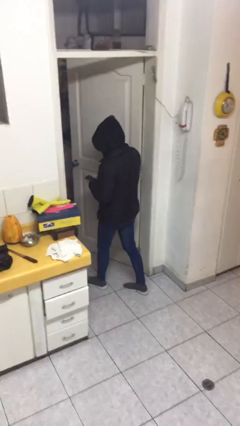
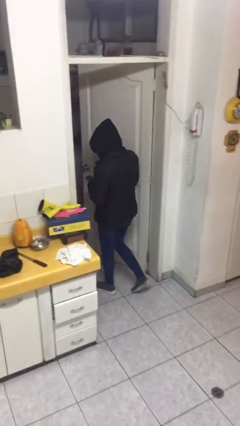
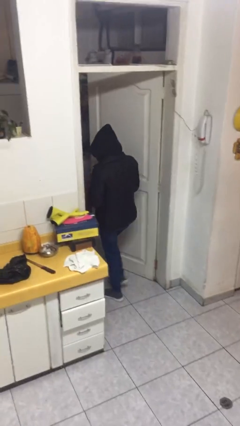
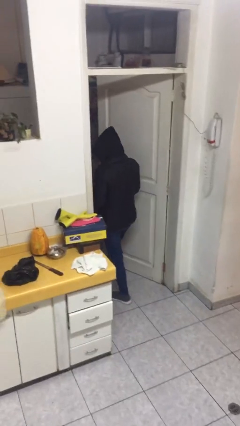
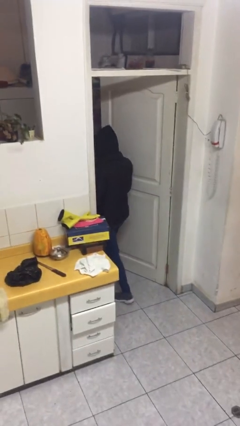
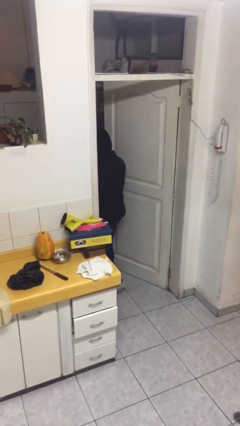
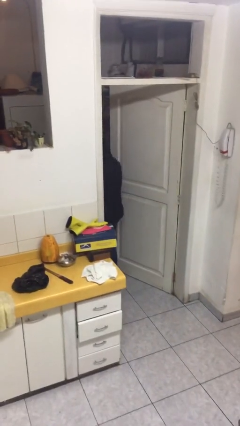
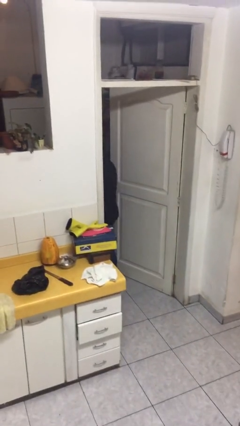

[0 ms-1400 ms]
person exits scene through structure

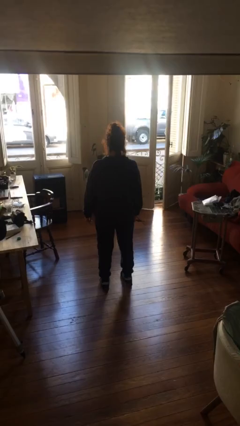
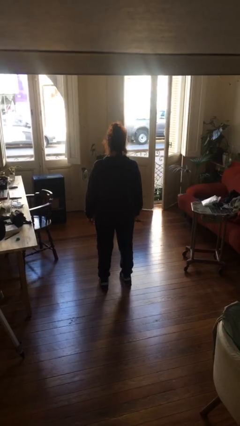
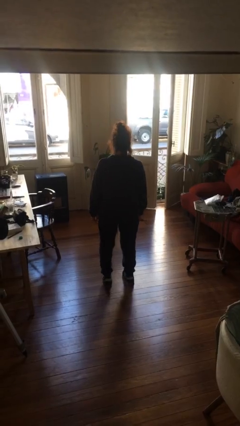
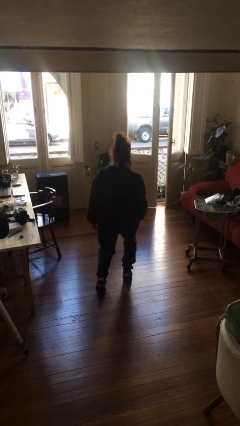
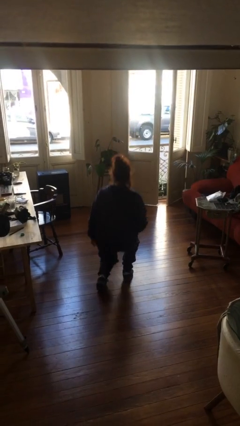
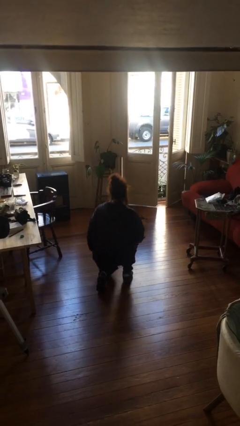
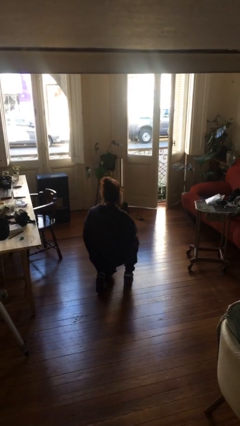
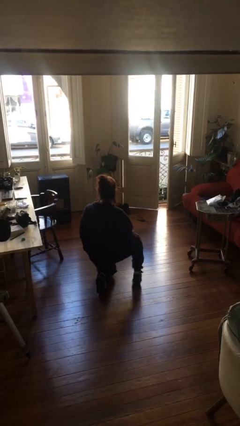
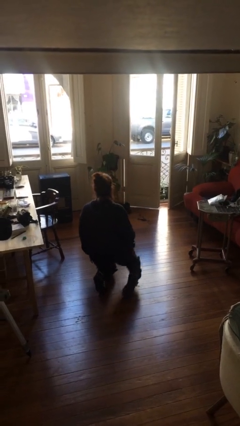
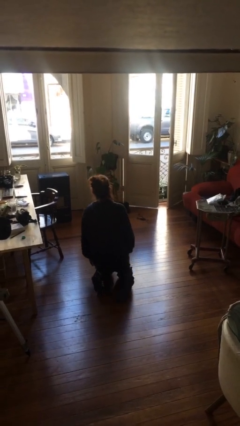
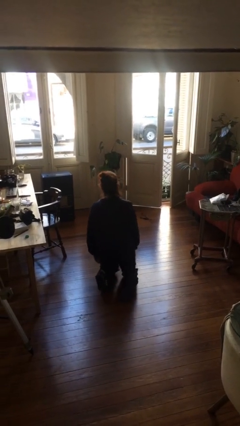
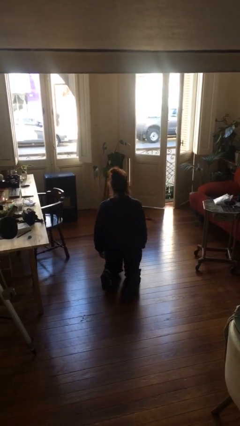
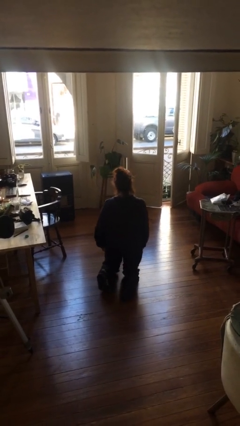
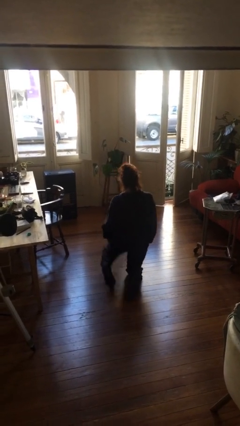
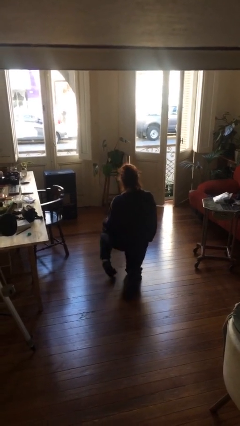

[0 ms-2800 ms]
person kneels

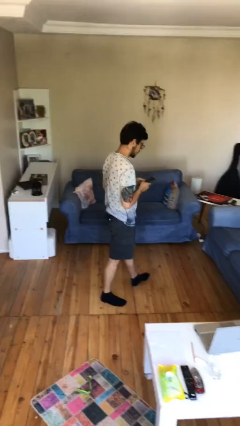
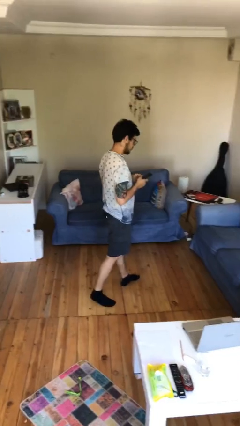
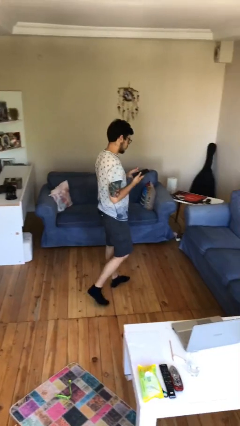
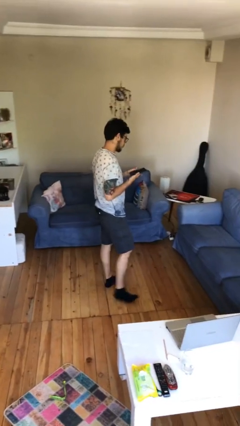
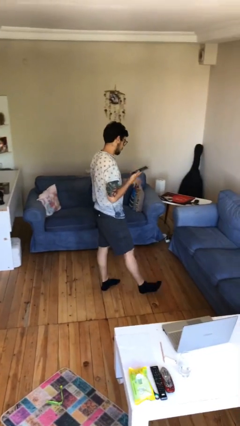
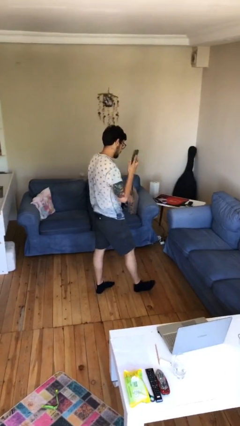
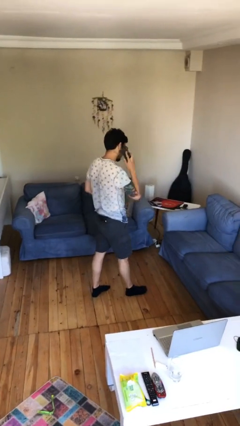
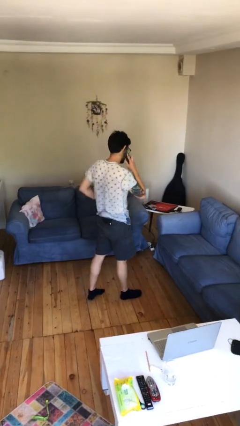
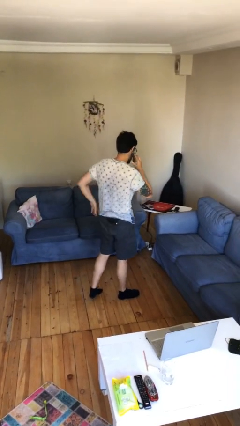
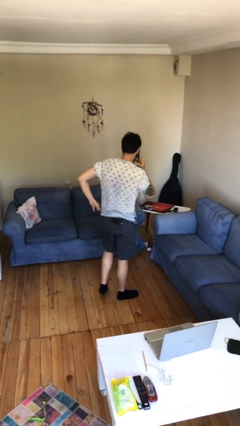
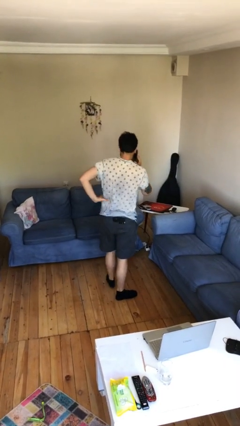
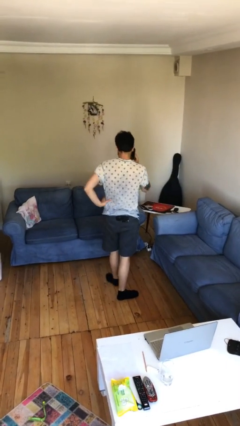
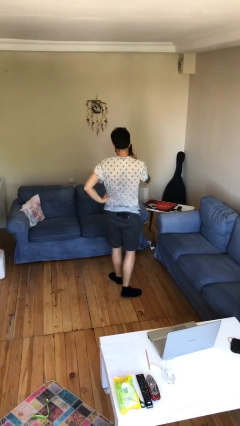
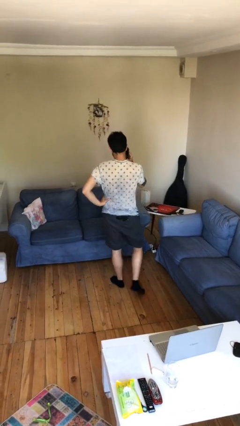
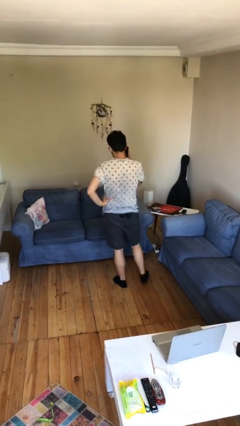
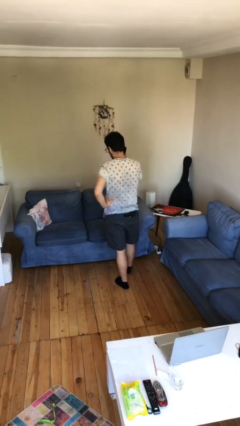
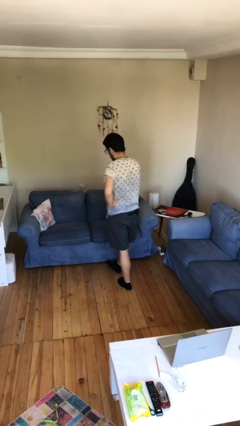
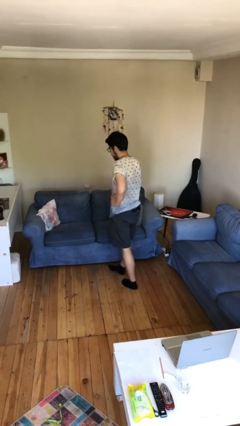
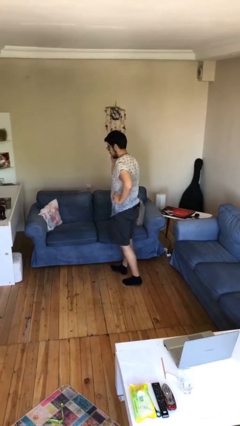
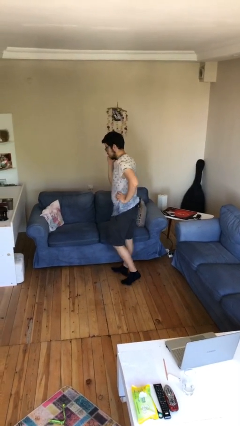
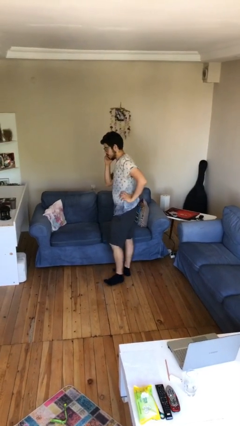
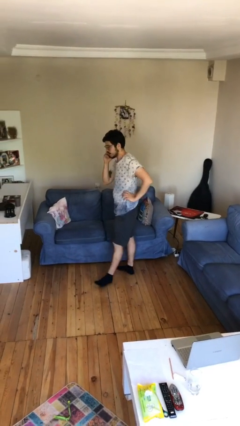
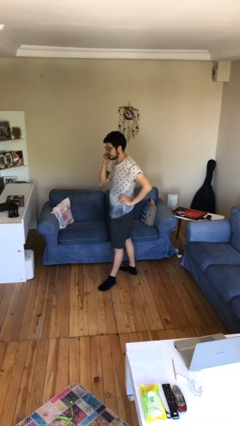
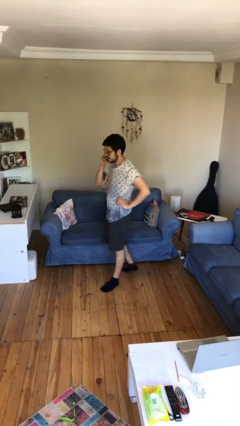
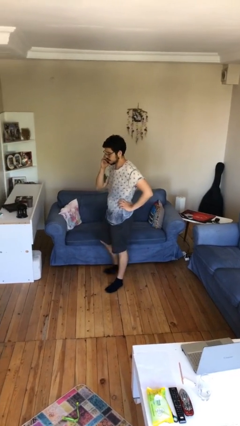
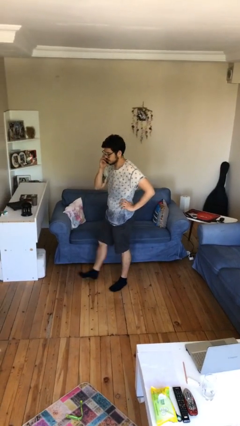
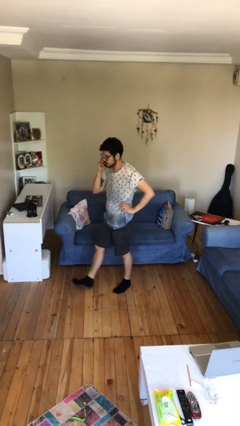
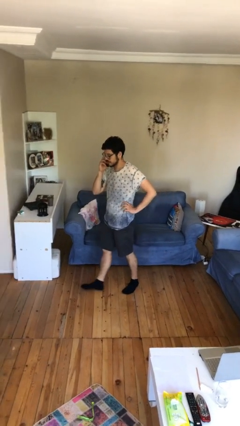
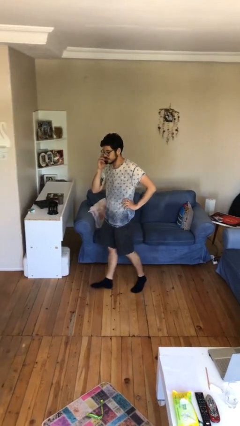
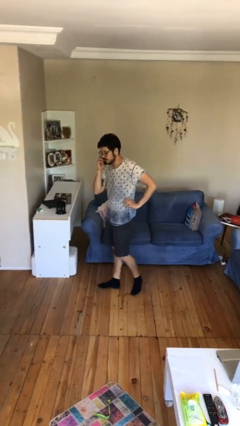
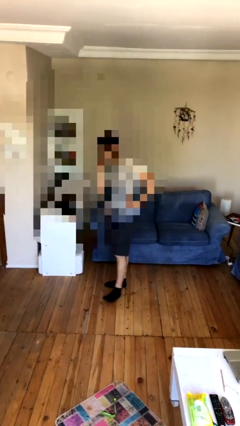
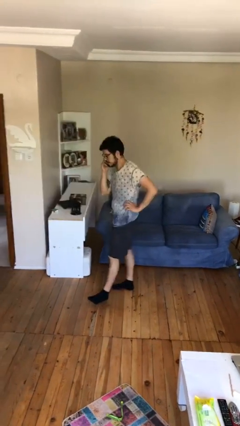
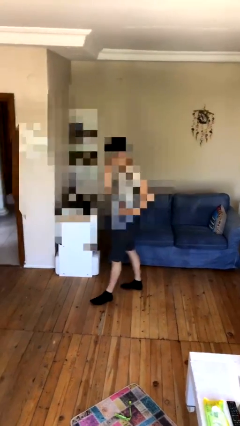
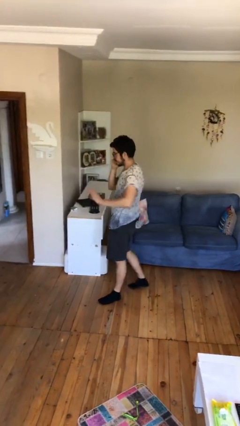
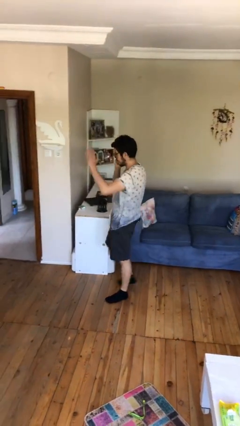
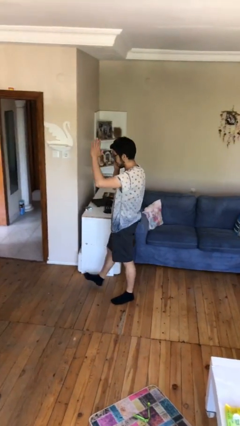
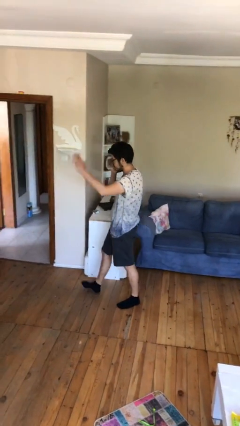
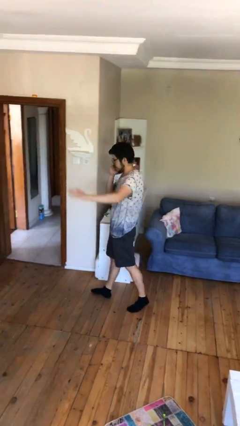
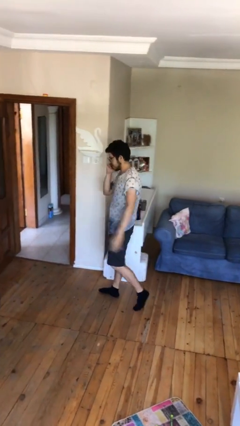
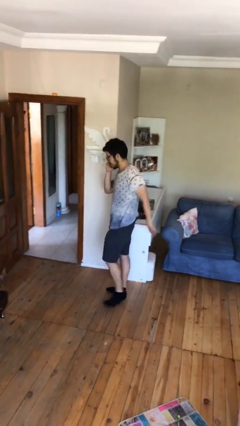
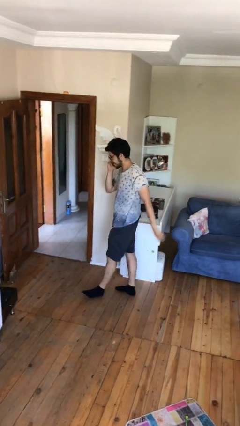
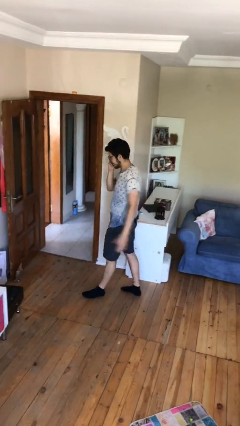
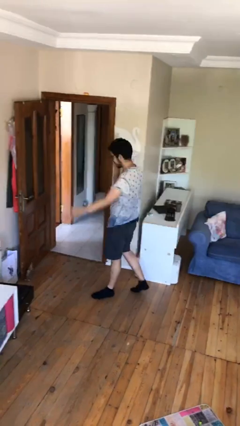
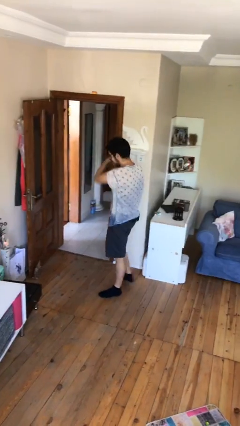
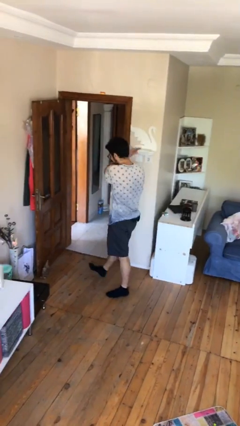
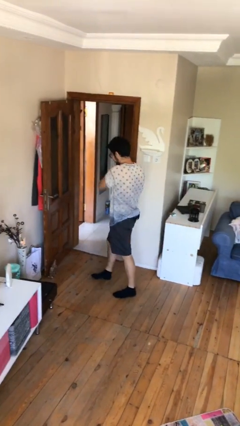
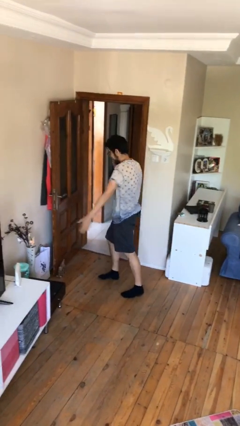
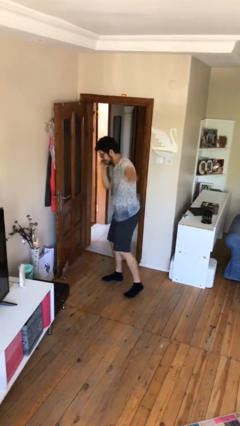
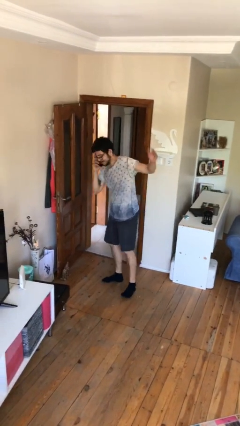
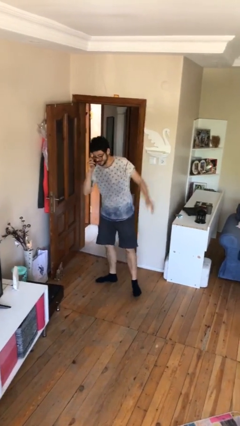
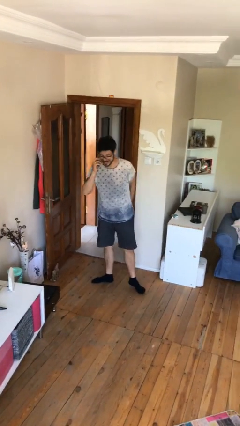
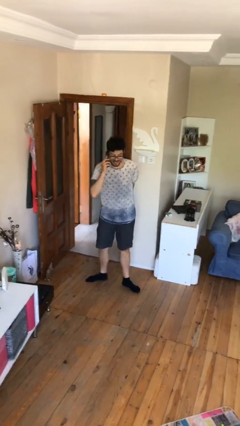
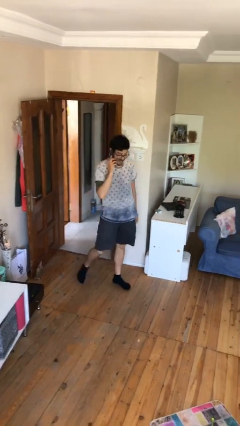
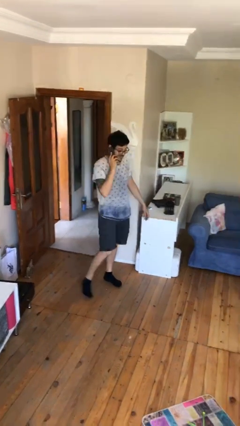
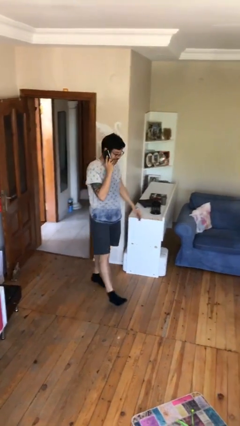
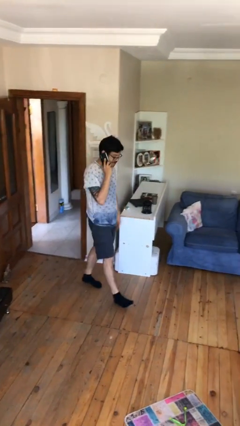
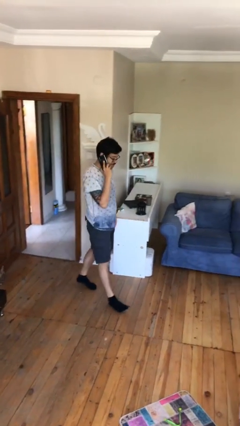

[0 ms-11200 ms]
person talks on phone

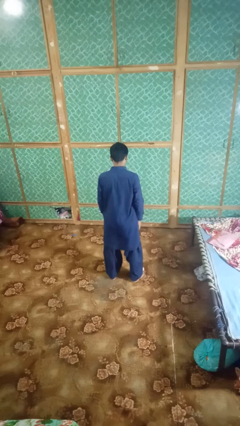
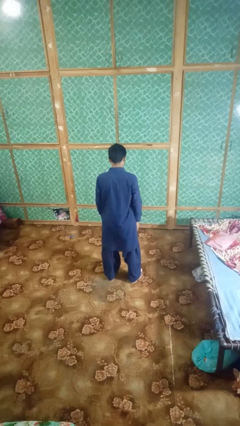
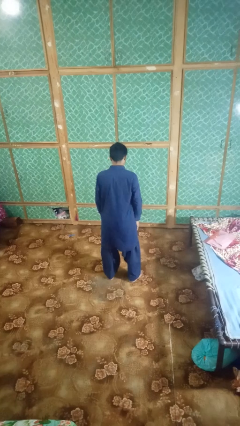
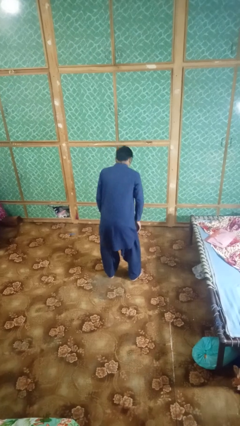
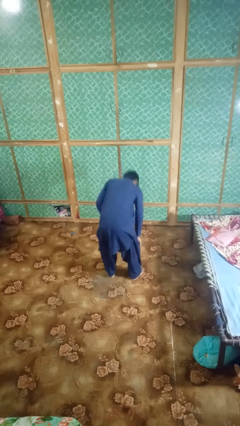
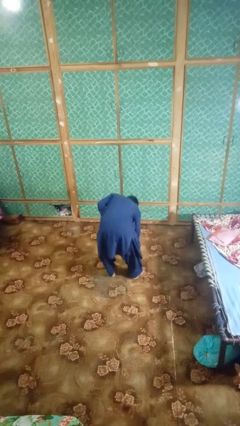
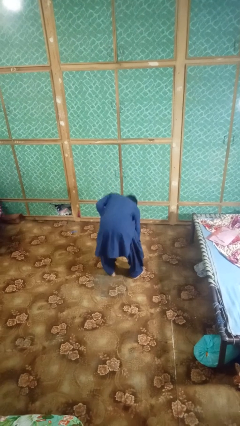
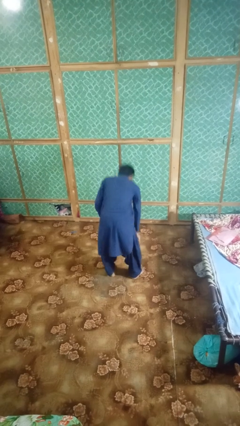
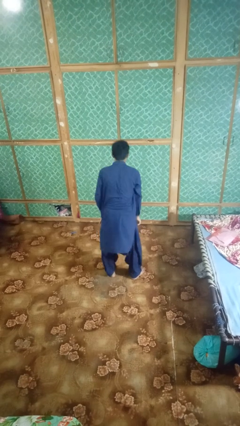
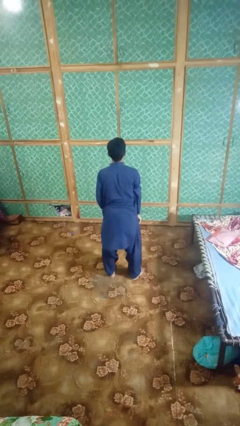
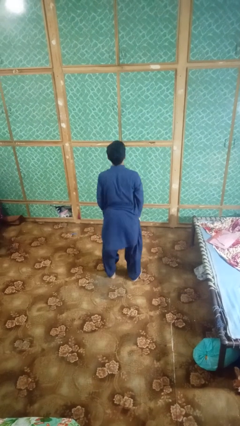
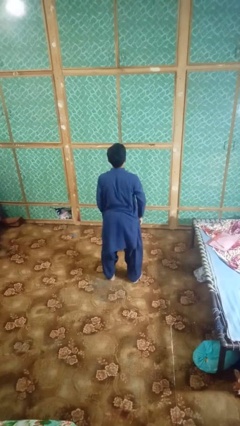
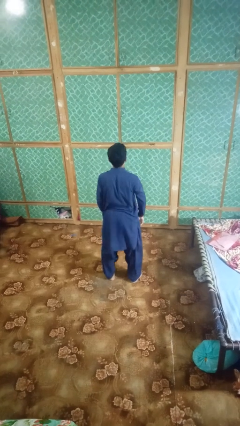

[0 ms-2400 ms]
person picks up object from floor

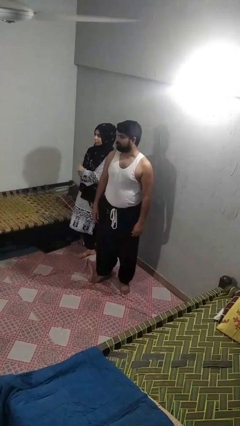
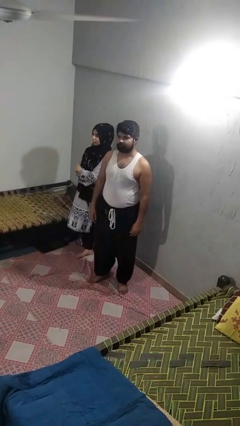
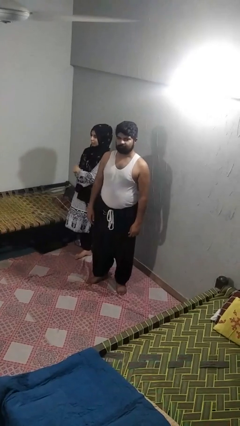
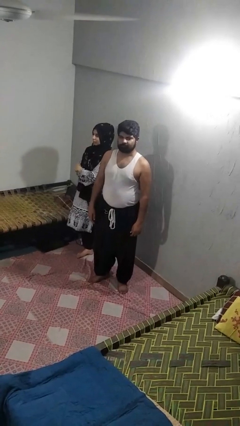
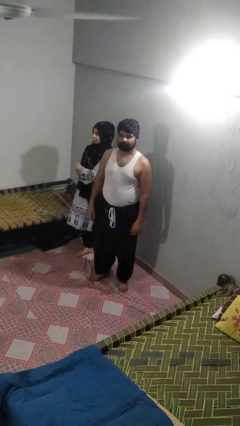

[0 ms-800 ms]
person looks over shoulder
